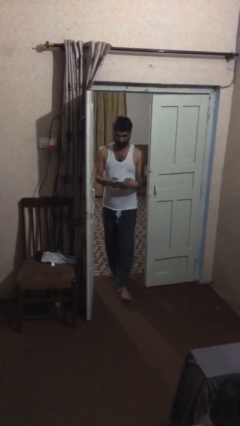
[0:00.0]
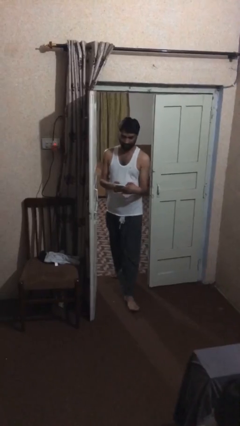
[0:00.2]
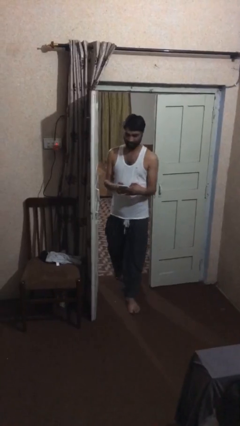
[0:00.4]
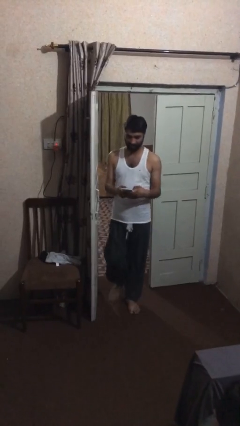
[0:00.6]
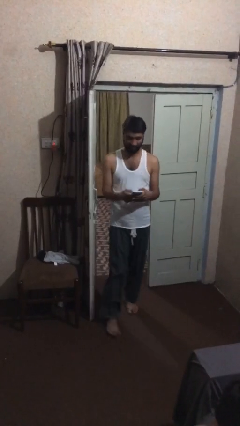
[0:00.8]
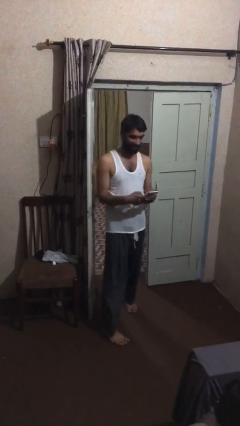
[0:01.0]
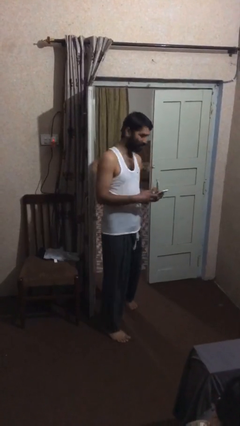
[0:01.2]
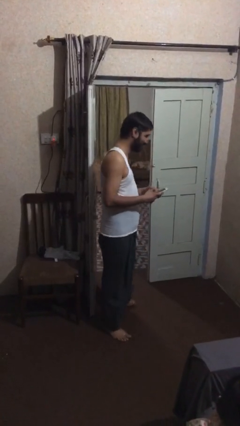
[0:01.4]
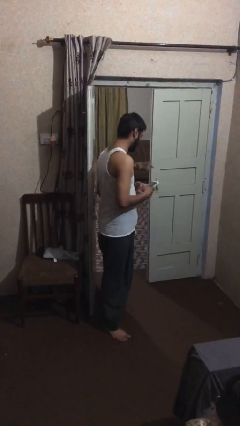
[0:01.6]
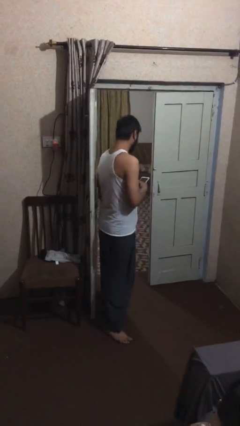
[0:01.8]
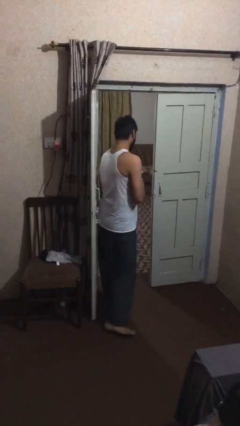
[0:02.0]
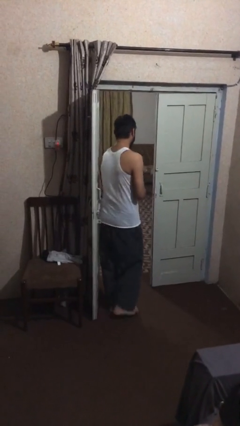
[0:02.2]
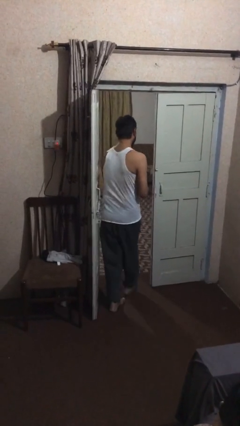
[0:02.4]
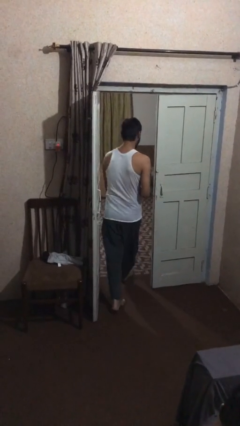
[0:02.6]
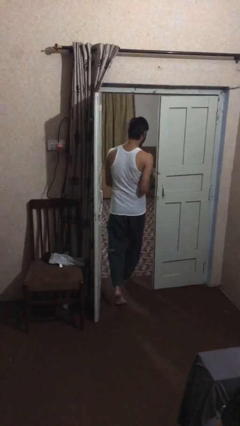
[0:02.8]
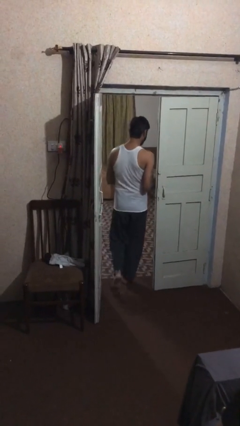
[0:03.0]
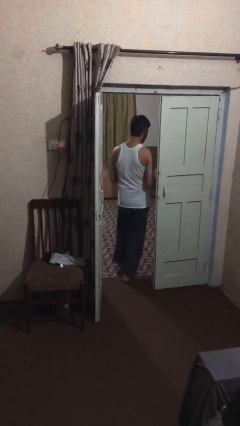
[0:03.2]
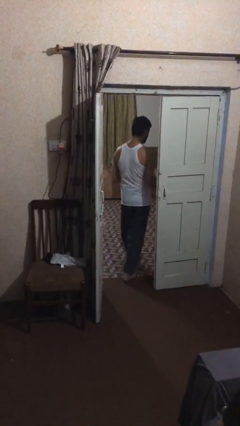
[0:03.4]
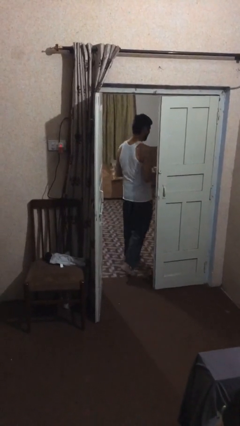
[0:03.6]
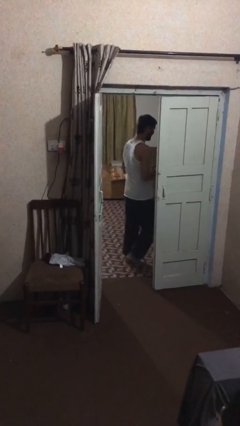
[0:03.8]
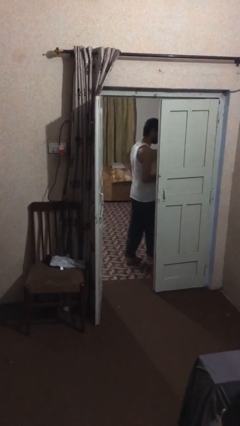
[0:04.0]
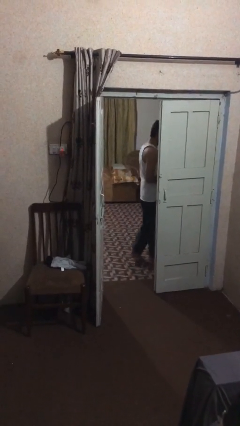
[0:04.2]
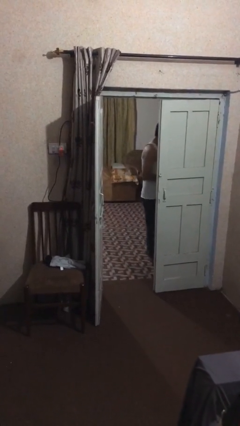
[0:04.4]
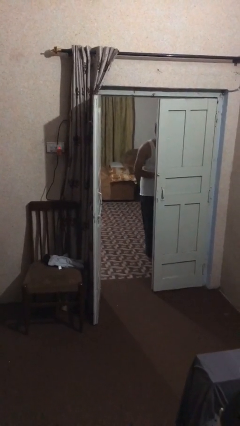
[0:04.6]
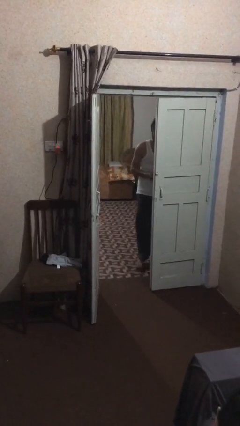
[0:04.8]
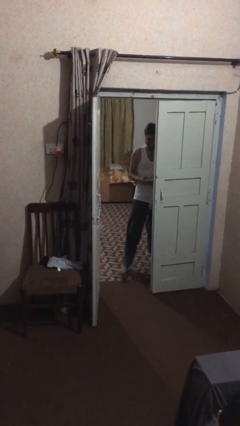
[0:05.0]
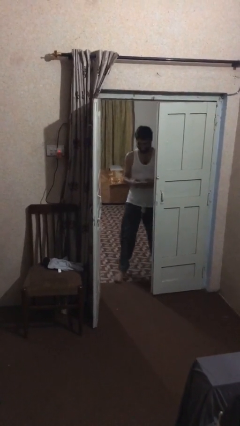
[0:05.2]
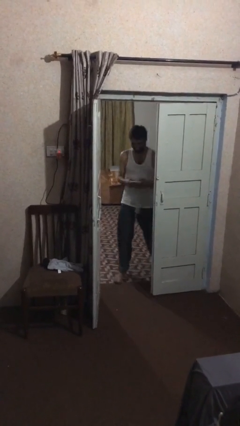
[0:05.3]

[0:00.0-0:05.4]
person exits scene through structure

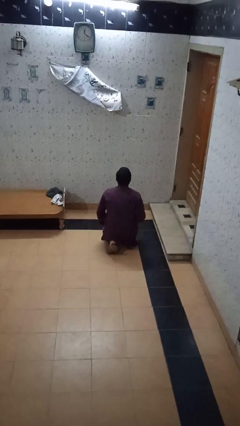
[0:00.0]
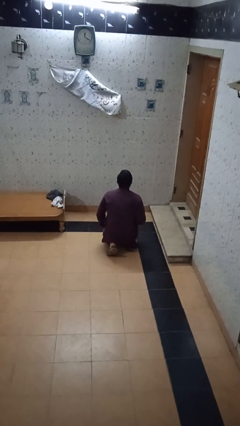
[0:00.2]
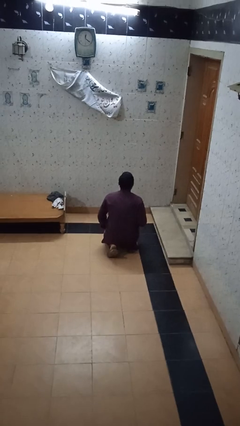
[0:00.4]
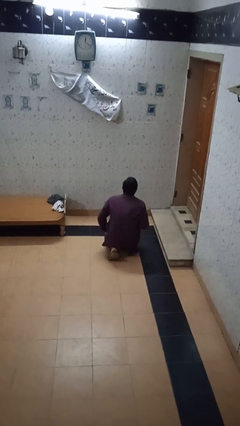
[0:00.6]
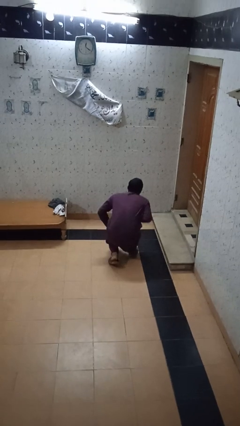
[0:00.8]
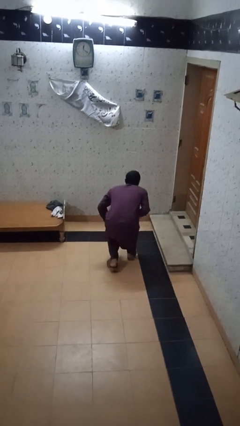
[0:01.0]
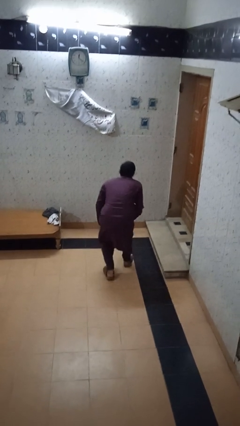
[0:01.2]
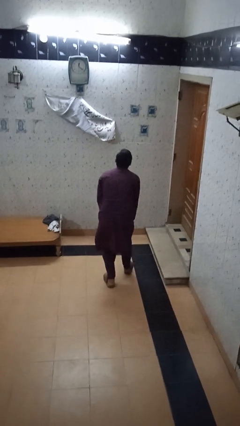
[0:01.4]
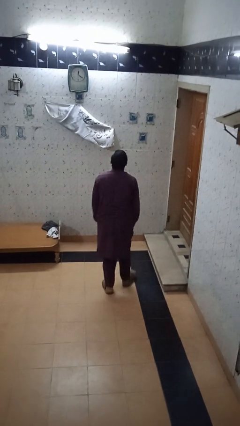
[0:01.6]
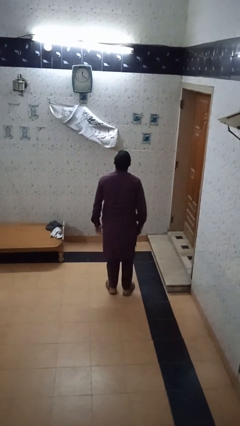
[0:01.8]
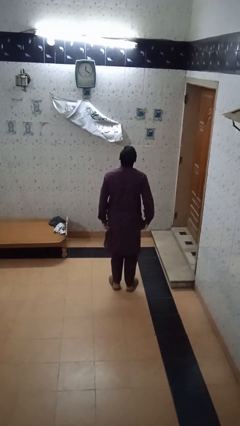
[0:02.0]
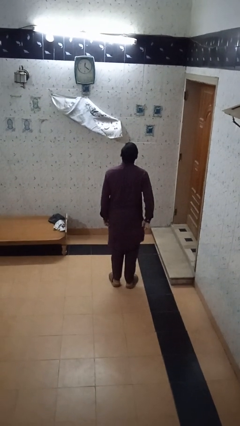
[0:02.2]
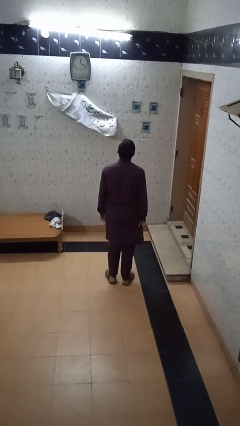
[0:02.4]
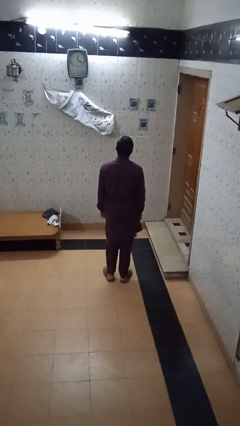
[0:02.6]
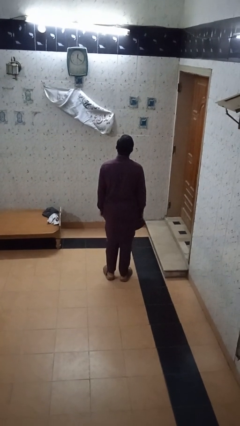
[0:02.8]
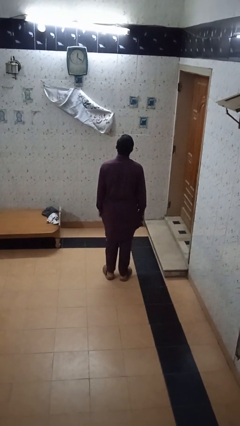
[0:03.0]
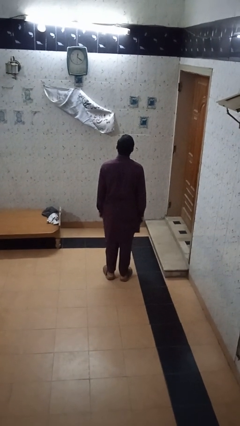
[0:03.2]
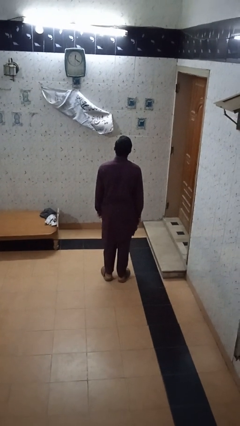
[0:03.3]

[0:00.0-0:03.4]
person stands up from floor

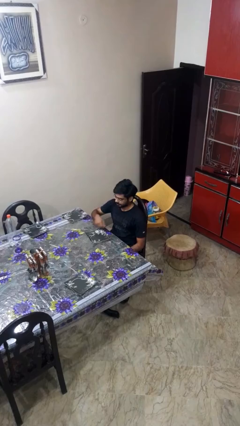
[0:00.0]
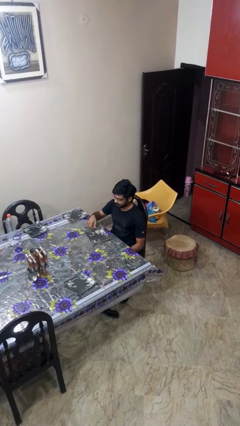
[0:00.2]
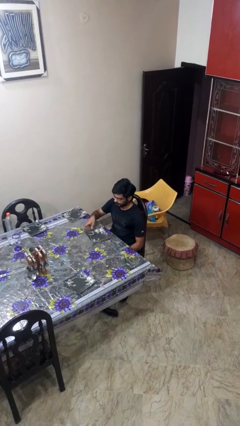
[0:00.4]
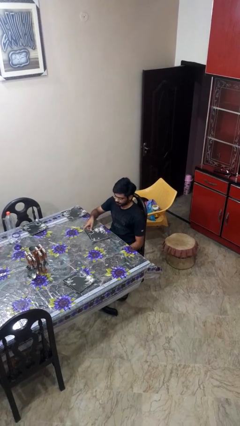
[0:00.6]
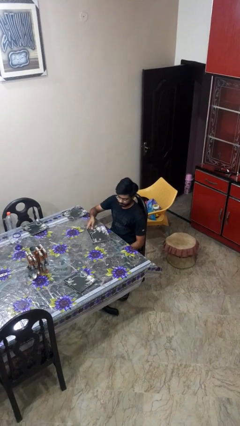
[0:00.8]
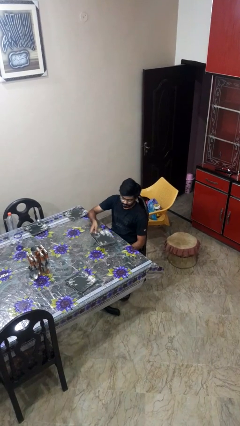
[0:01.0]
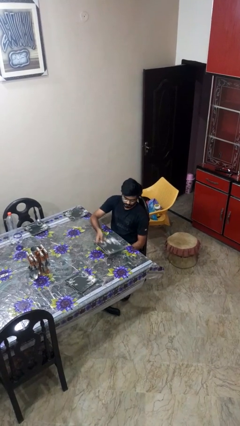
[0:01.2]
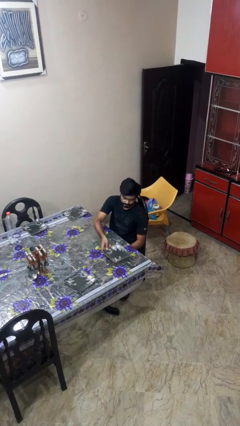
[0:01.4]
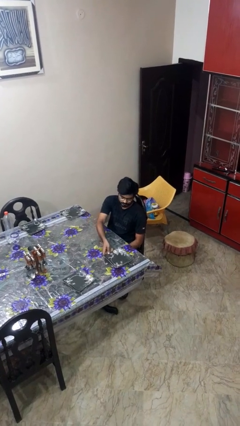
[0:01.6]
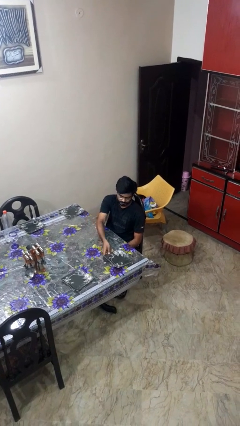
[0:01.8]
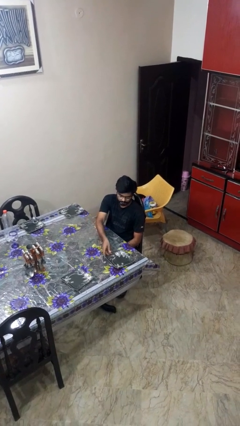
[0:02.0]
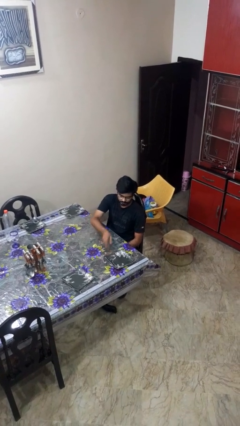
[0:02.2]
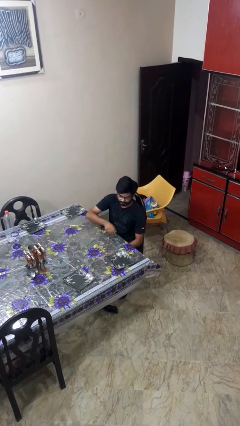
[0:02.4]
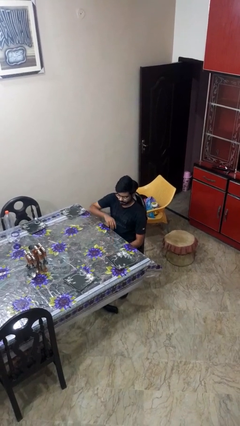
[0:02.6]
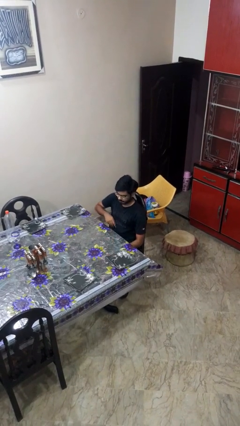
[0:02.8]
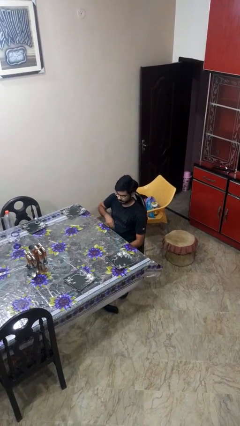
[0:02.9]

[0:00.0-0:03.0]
person sets table

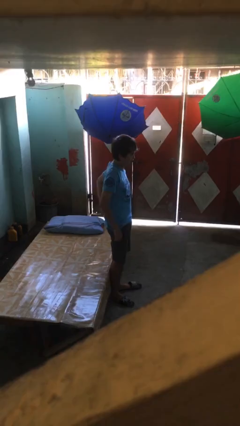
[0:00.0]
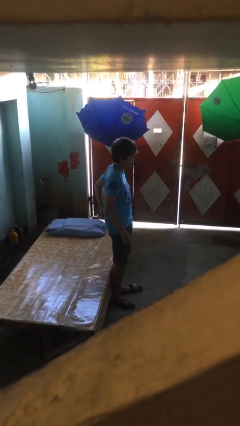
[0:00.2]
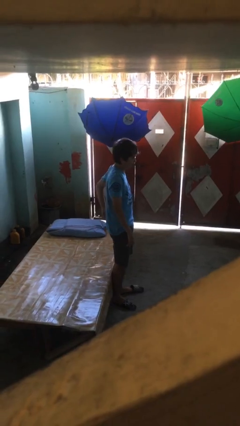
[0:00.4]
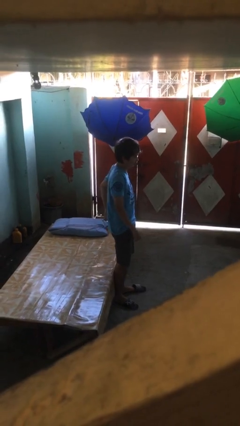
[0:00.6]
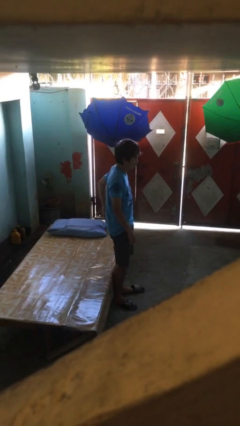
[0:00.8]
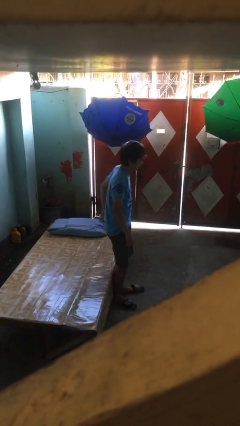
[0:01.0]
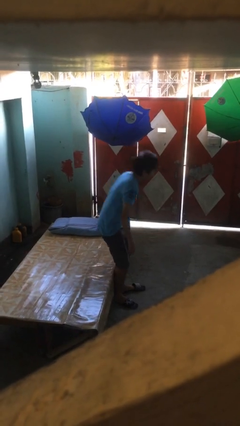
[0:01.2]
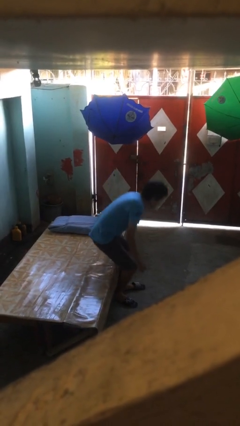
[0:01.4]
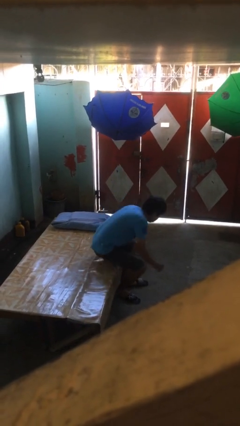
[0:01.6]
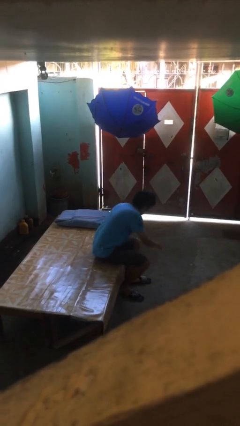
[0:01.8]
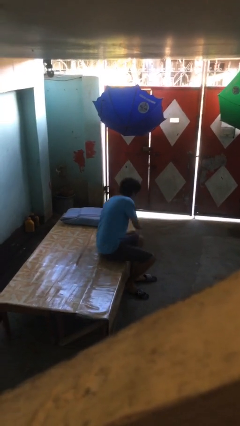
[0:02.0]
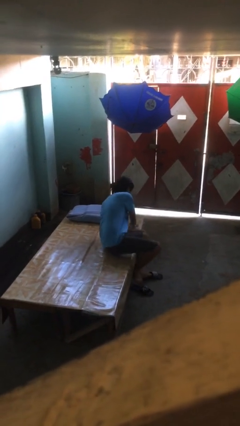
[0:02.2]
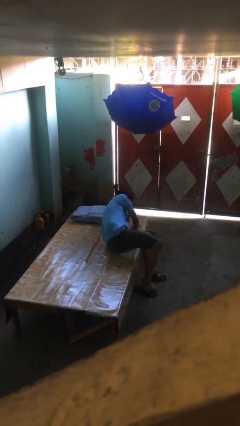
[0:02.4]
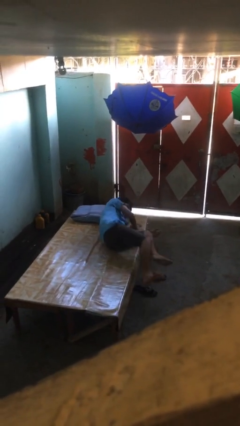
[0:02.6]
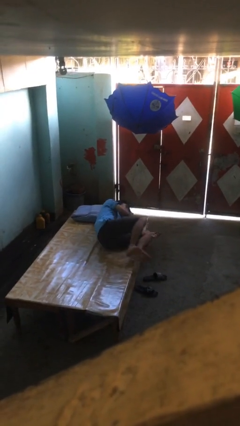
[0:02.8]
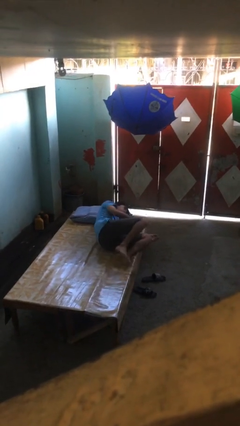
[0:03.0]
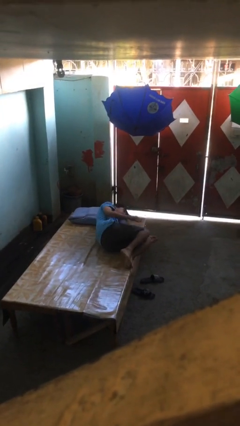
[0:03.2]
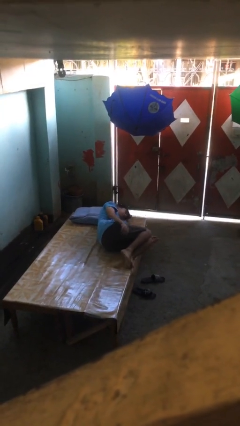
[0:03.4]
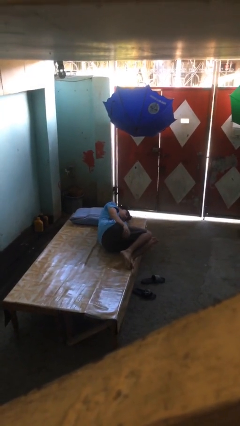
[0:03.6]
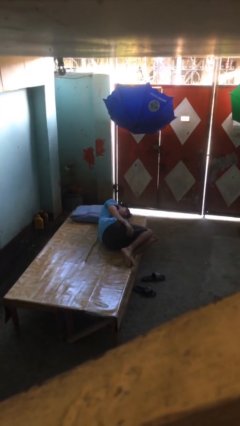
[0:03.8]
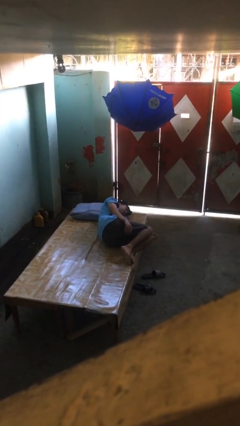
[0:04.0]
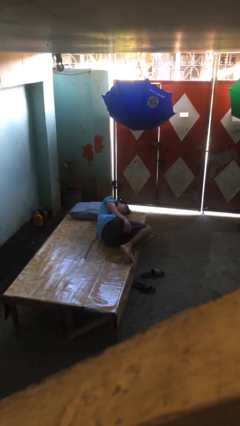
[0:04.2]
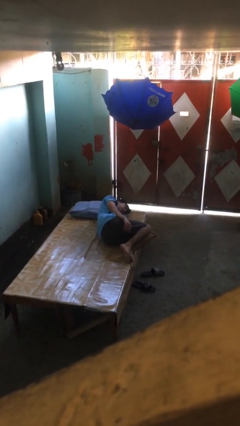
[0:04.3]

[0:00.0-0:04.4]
person lies down on bed

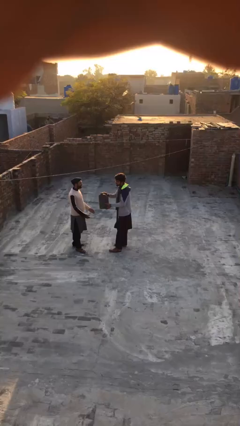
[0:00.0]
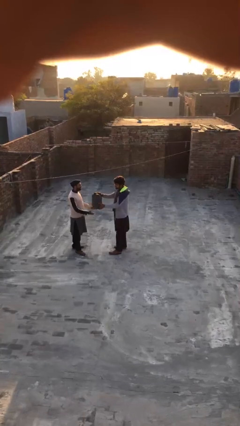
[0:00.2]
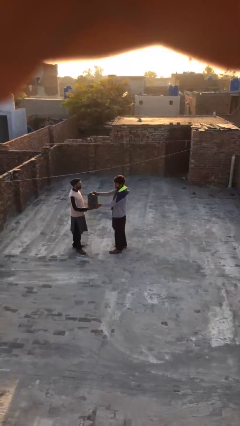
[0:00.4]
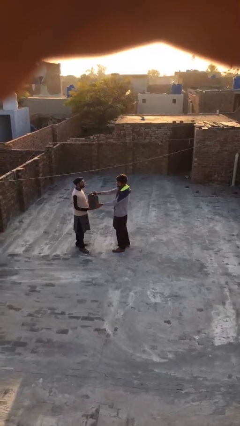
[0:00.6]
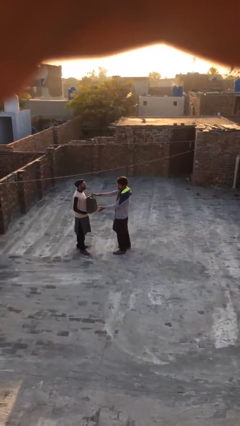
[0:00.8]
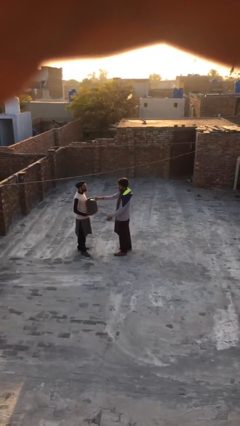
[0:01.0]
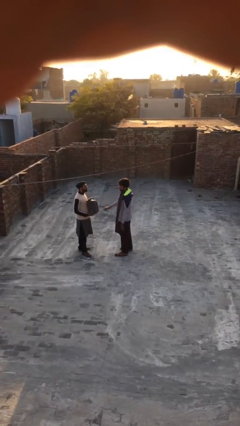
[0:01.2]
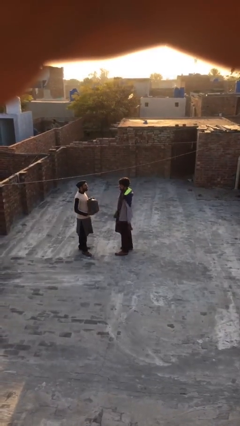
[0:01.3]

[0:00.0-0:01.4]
person transfers object to person

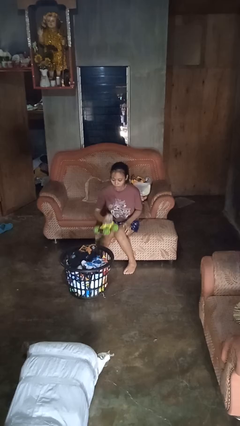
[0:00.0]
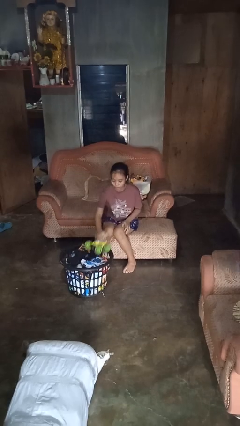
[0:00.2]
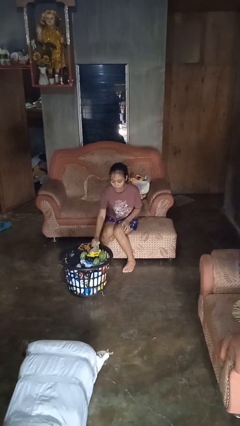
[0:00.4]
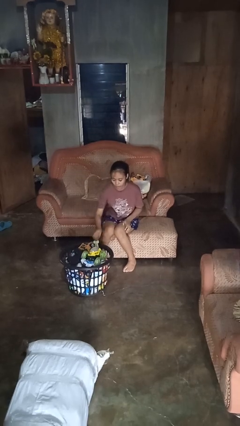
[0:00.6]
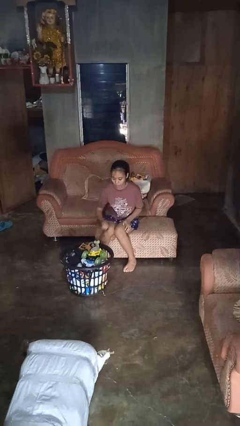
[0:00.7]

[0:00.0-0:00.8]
person puts object into basket
